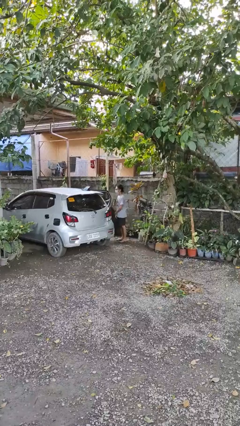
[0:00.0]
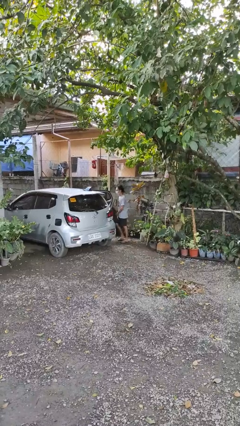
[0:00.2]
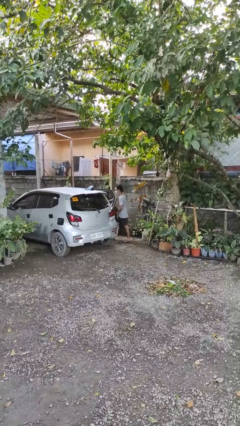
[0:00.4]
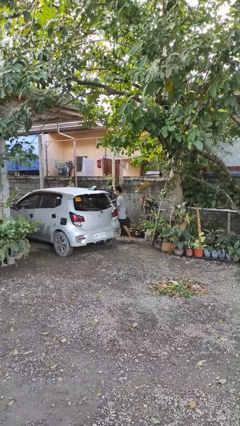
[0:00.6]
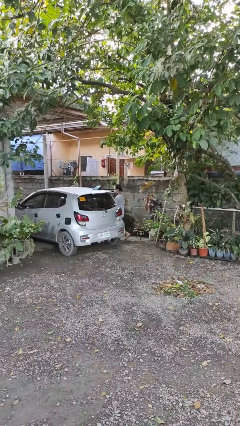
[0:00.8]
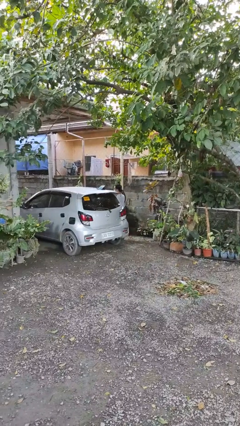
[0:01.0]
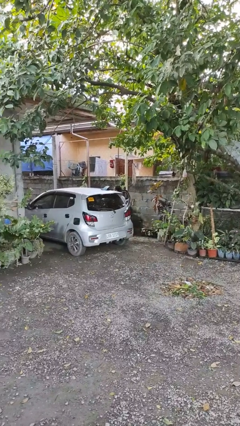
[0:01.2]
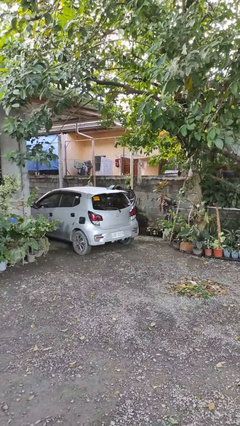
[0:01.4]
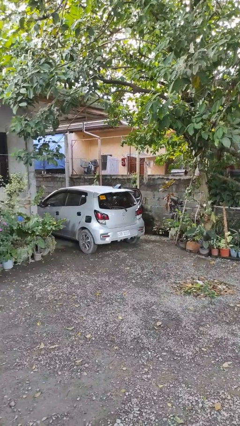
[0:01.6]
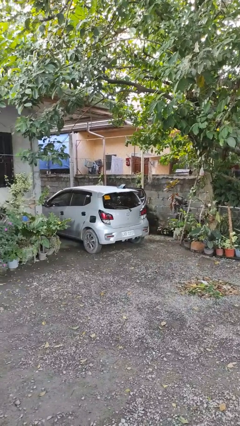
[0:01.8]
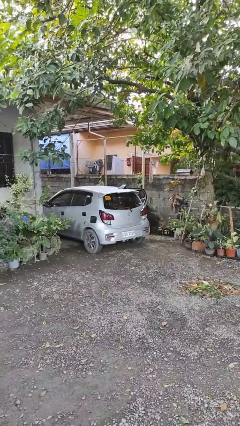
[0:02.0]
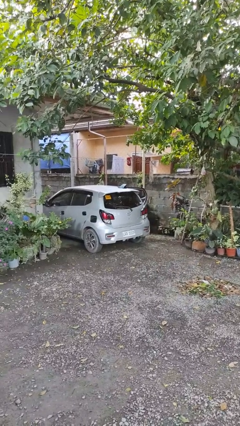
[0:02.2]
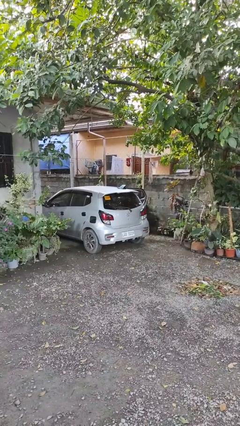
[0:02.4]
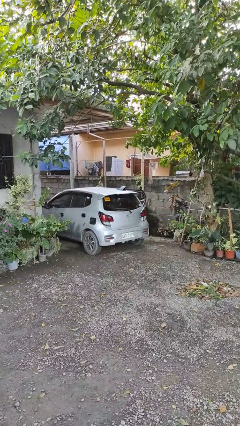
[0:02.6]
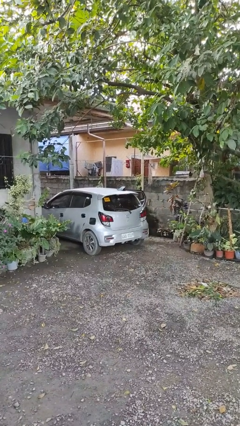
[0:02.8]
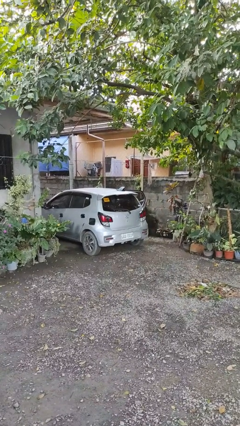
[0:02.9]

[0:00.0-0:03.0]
person enters car

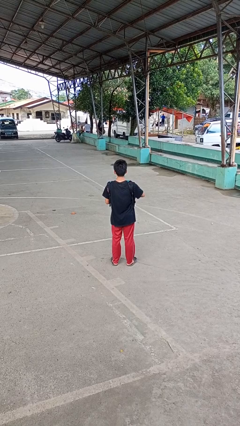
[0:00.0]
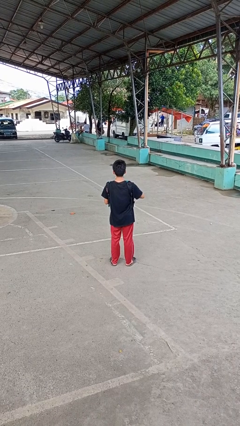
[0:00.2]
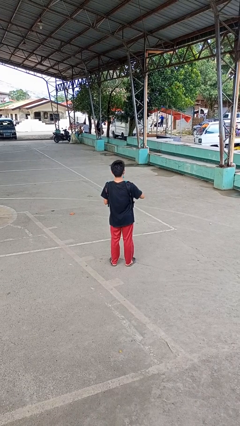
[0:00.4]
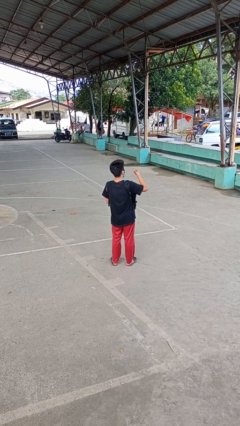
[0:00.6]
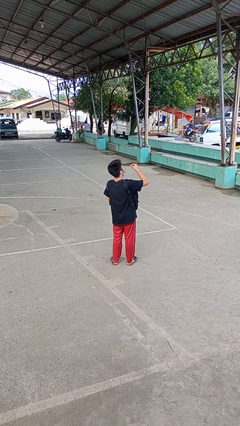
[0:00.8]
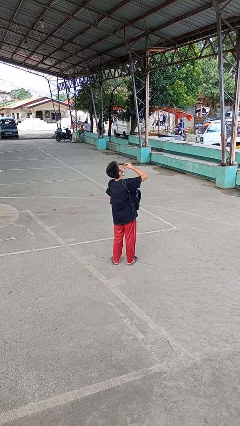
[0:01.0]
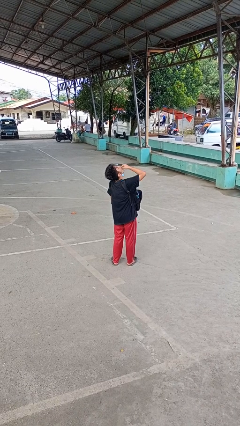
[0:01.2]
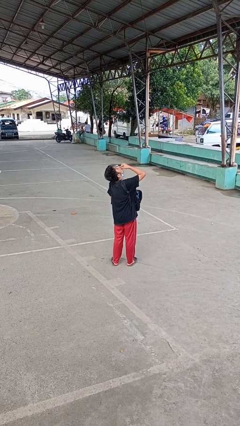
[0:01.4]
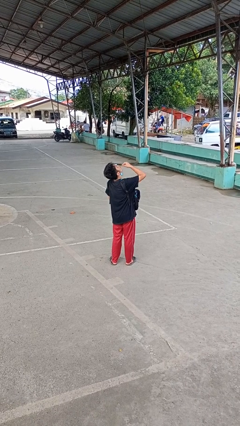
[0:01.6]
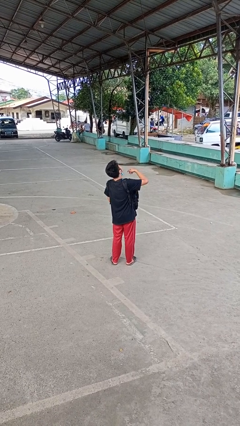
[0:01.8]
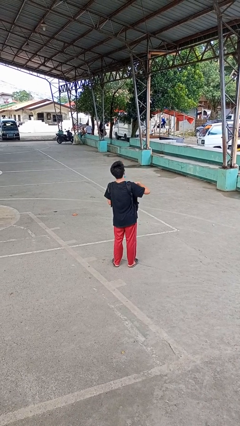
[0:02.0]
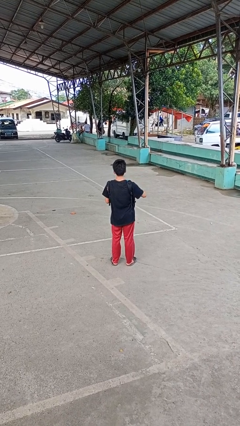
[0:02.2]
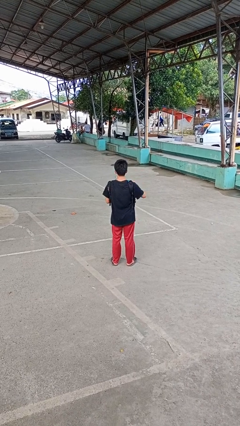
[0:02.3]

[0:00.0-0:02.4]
person eats snack from bag

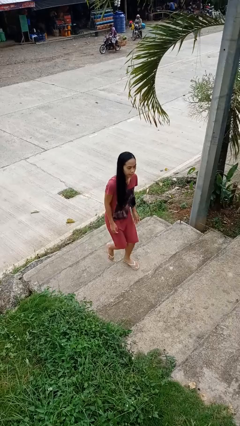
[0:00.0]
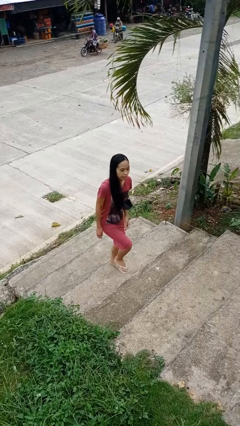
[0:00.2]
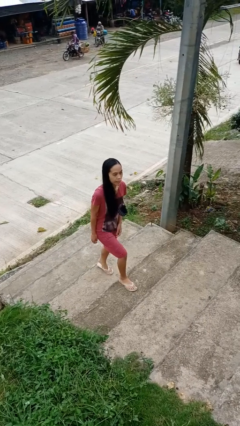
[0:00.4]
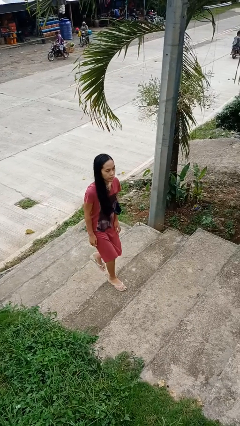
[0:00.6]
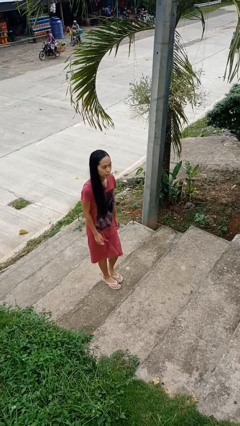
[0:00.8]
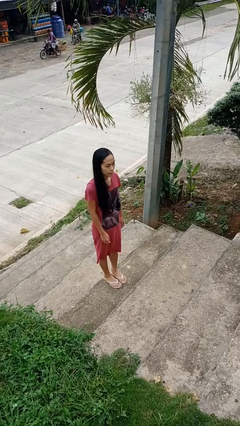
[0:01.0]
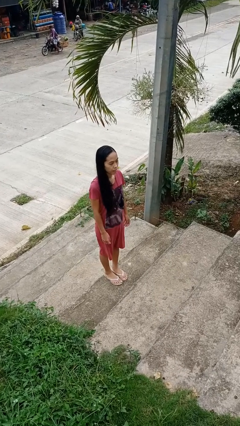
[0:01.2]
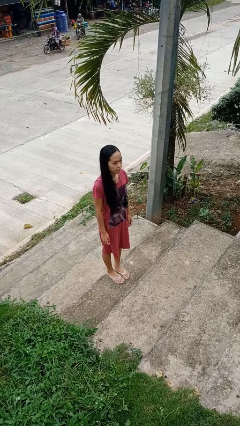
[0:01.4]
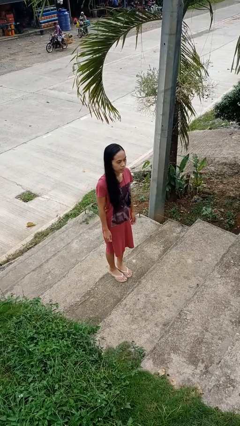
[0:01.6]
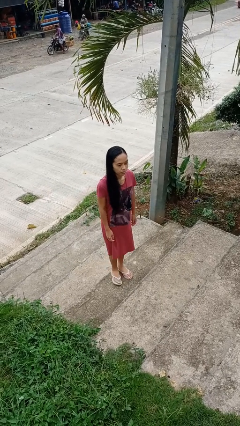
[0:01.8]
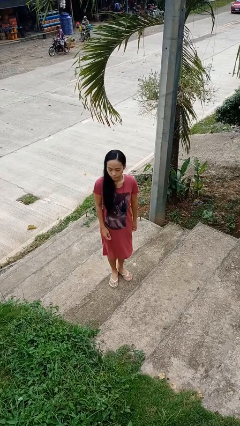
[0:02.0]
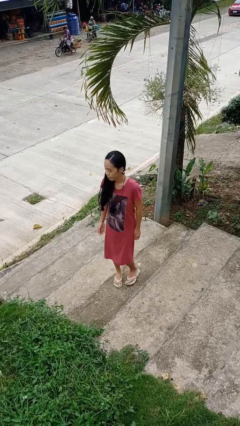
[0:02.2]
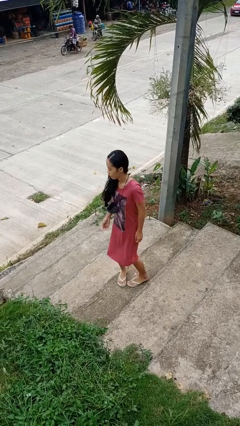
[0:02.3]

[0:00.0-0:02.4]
person climbs up stairs

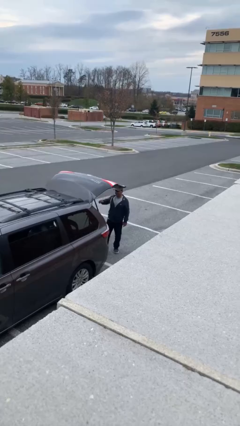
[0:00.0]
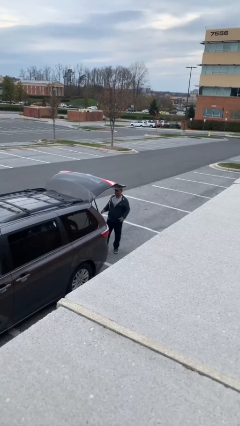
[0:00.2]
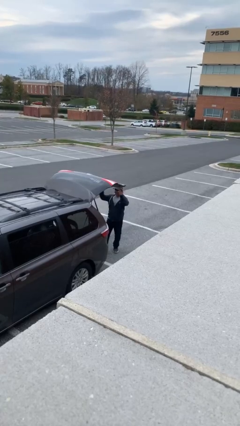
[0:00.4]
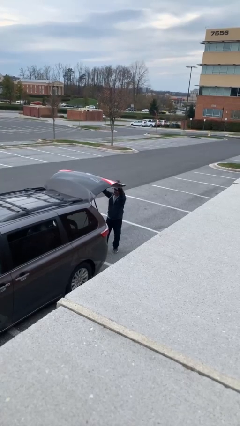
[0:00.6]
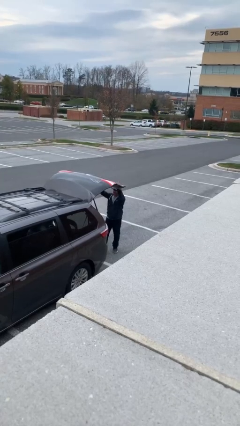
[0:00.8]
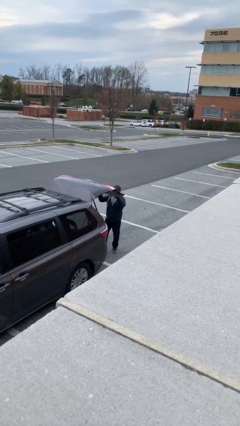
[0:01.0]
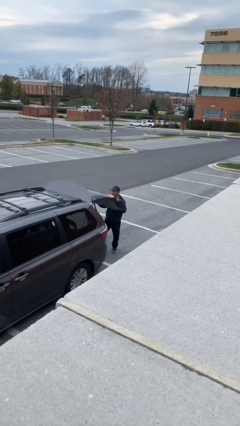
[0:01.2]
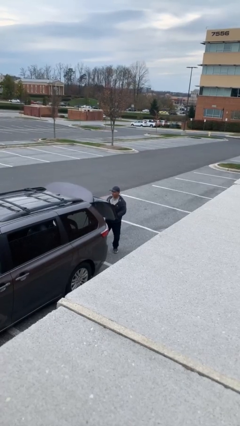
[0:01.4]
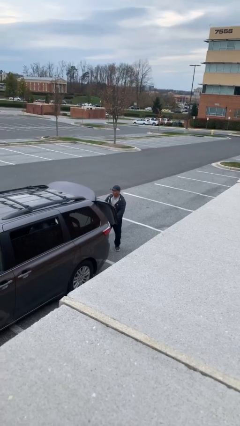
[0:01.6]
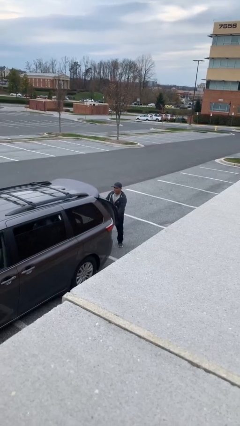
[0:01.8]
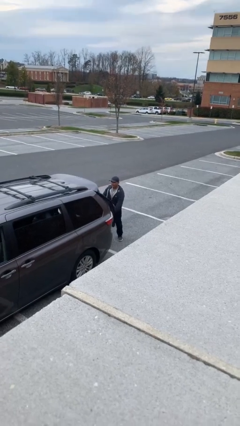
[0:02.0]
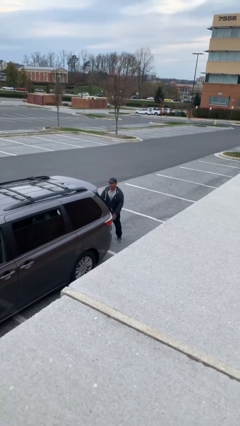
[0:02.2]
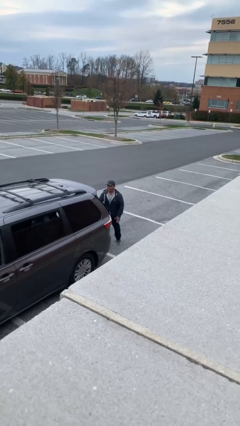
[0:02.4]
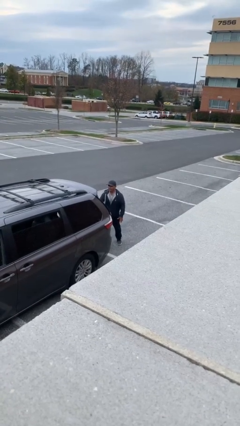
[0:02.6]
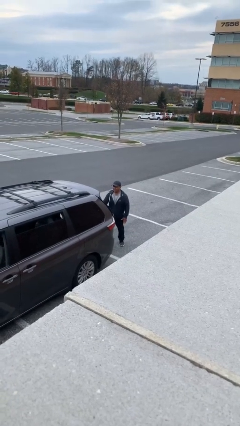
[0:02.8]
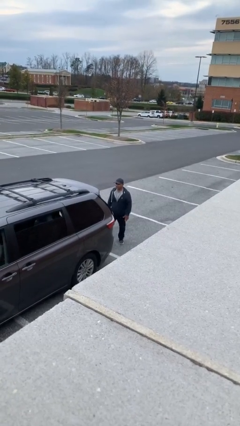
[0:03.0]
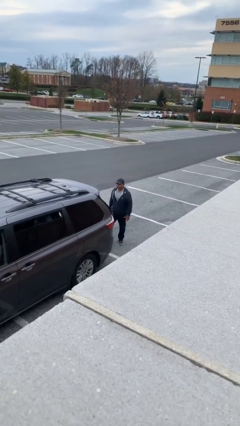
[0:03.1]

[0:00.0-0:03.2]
person closes car trunk

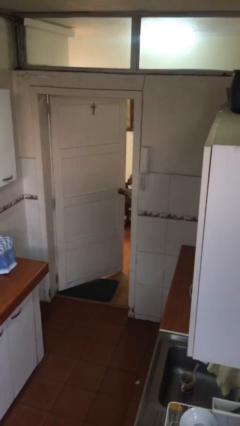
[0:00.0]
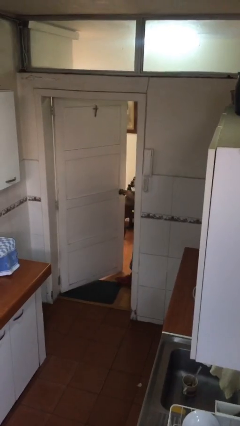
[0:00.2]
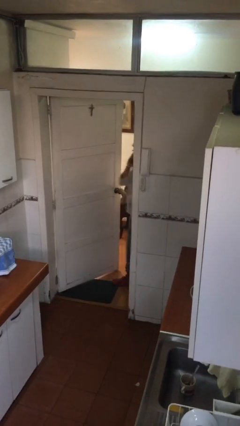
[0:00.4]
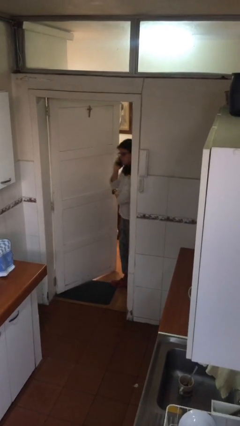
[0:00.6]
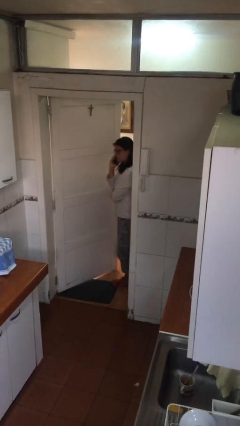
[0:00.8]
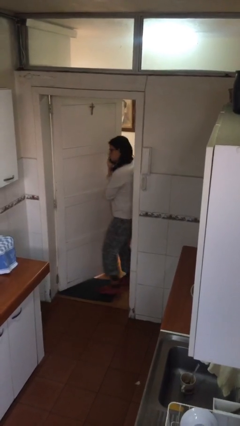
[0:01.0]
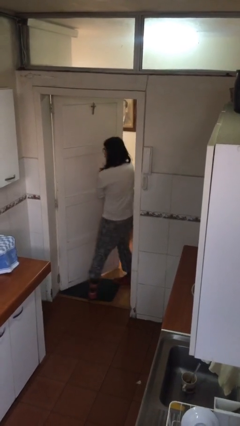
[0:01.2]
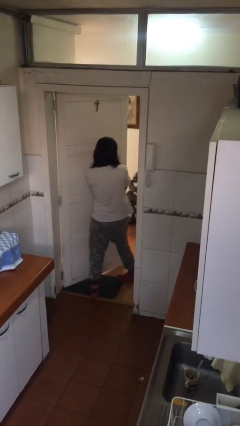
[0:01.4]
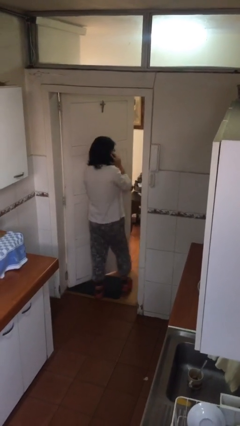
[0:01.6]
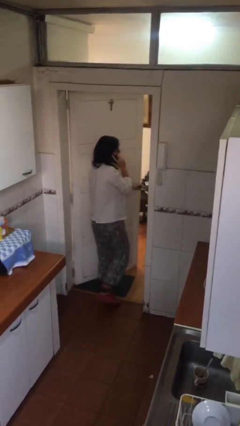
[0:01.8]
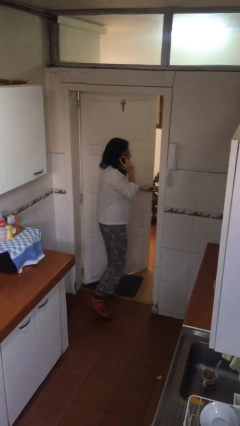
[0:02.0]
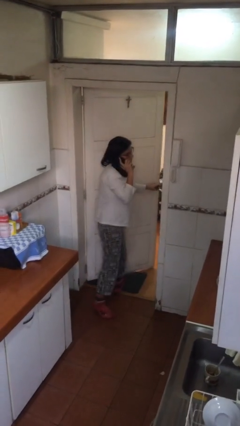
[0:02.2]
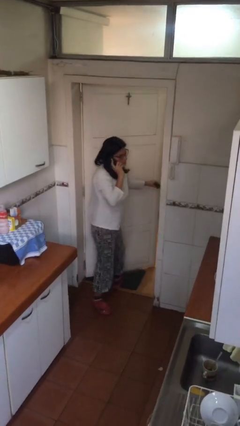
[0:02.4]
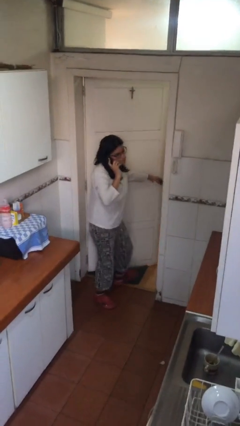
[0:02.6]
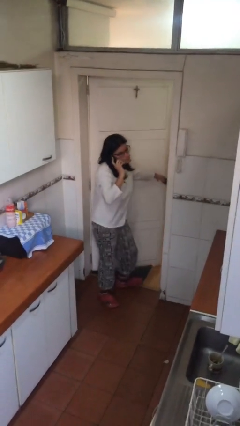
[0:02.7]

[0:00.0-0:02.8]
person enters scene through structure

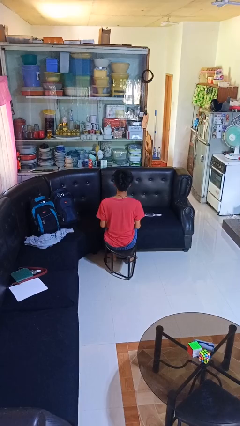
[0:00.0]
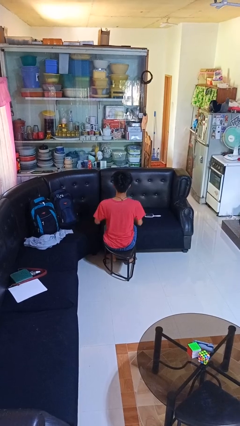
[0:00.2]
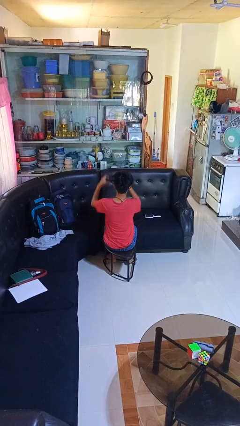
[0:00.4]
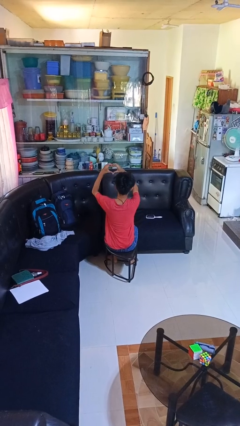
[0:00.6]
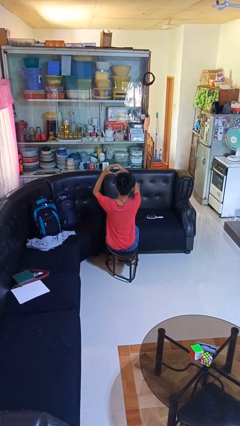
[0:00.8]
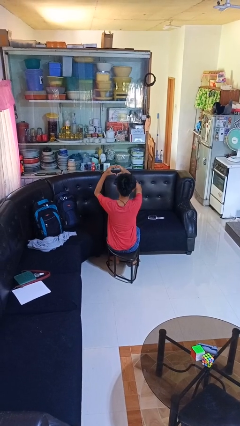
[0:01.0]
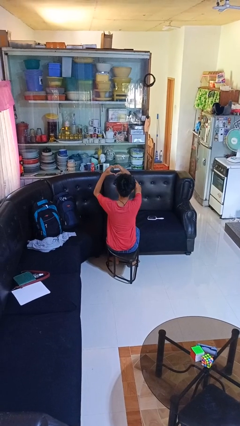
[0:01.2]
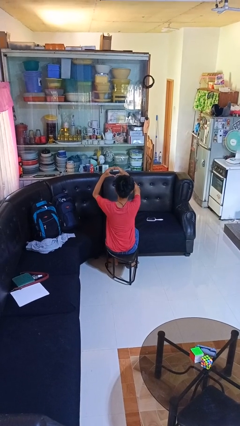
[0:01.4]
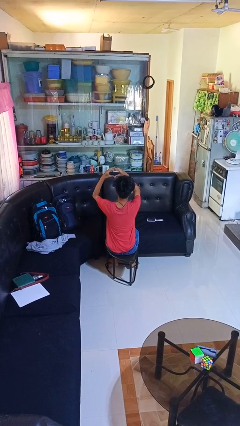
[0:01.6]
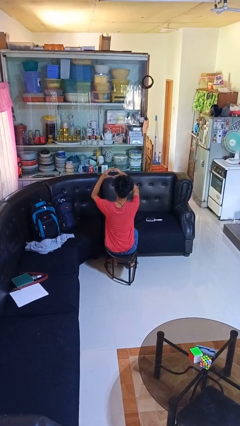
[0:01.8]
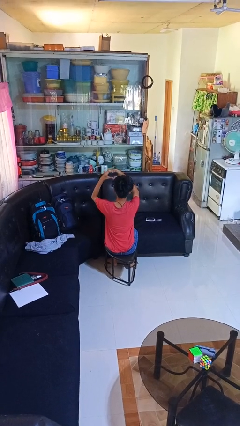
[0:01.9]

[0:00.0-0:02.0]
person gestures heart

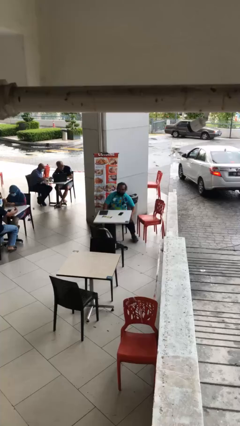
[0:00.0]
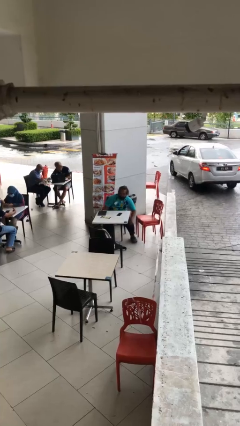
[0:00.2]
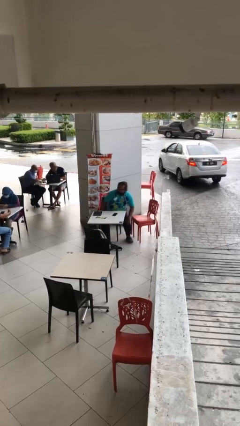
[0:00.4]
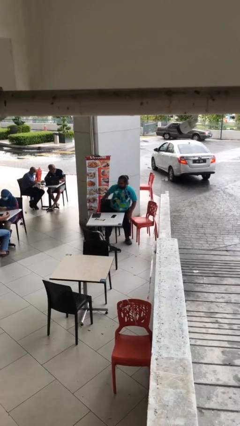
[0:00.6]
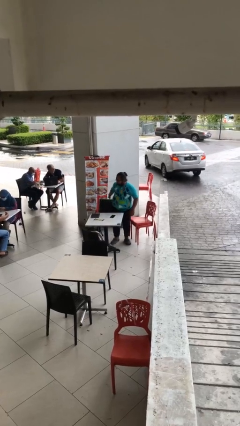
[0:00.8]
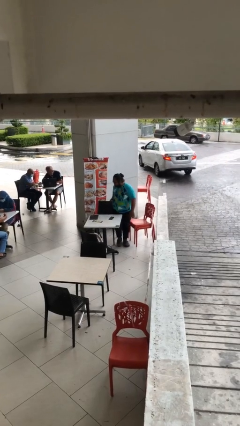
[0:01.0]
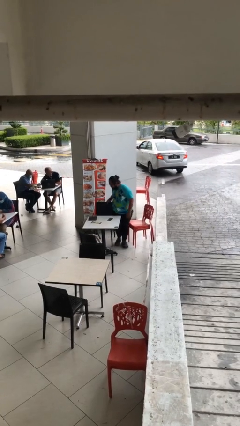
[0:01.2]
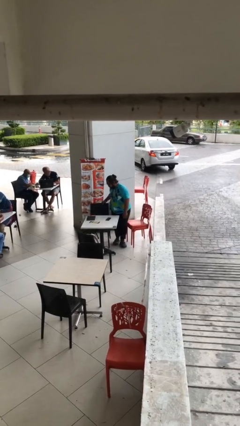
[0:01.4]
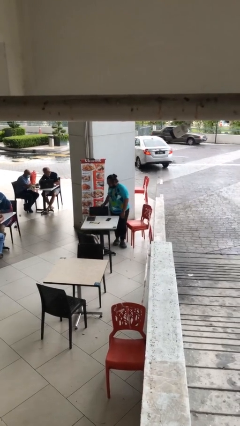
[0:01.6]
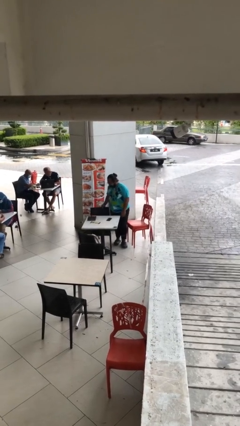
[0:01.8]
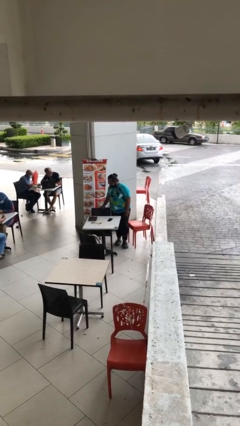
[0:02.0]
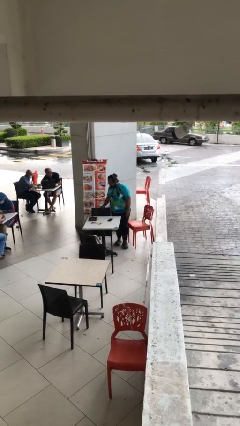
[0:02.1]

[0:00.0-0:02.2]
person stands up
